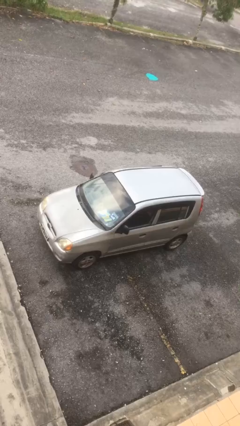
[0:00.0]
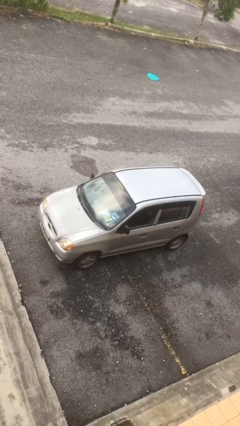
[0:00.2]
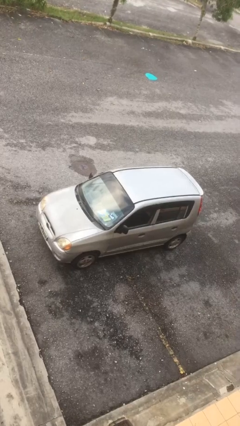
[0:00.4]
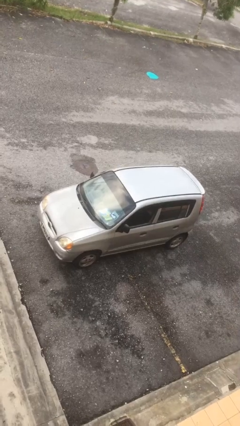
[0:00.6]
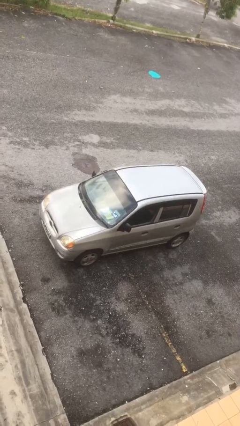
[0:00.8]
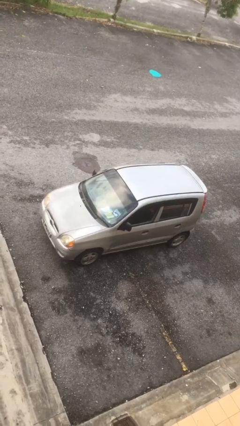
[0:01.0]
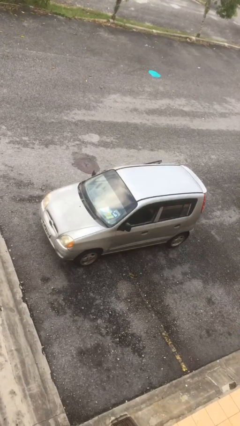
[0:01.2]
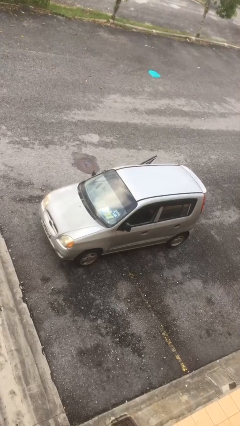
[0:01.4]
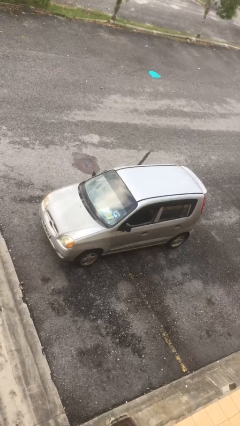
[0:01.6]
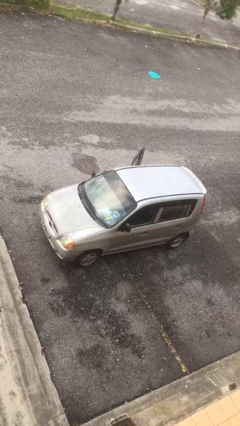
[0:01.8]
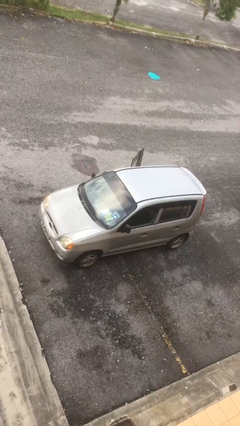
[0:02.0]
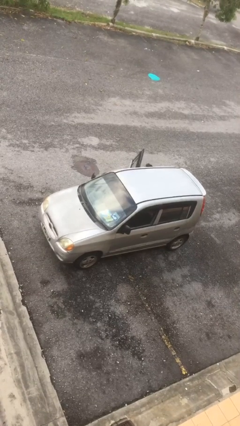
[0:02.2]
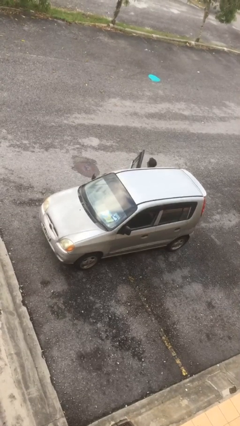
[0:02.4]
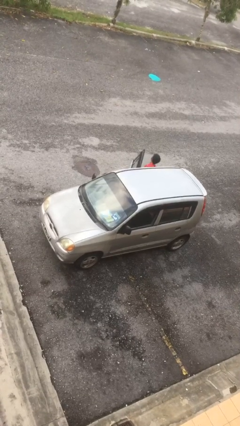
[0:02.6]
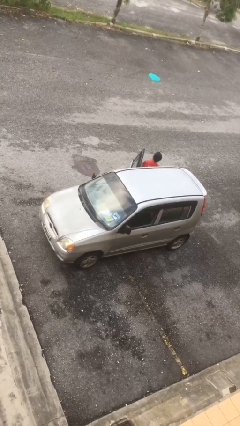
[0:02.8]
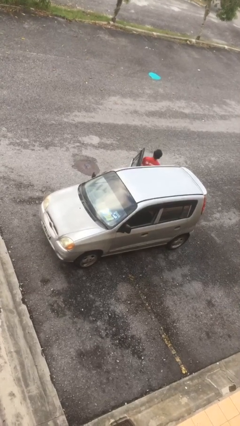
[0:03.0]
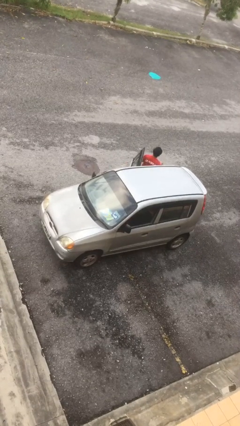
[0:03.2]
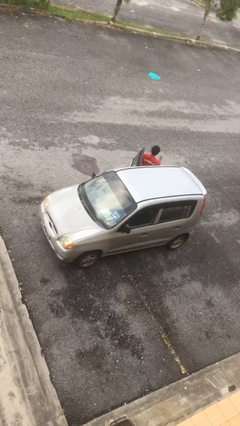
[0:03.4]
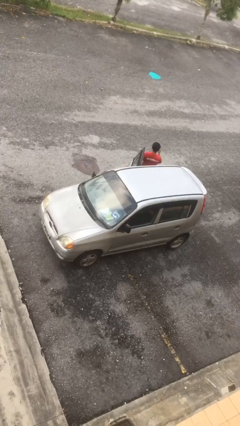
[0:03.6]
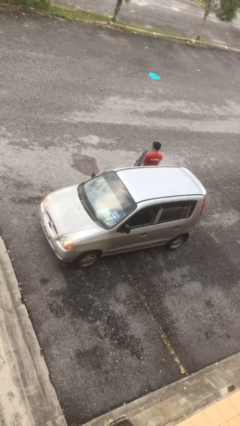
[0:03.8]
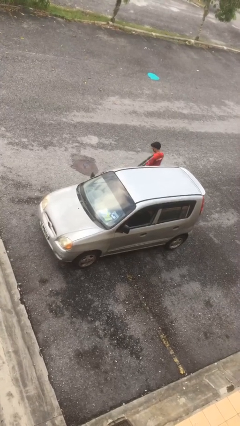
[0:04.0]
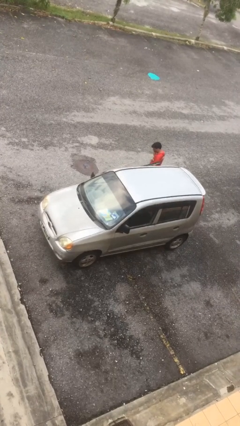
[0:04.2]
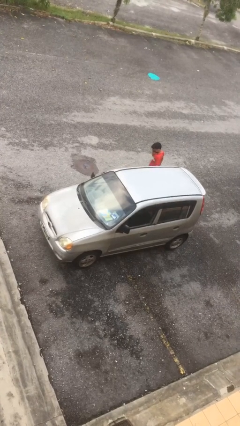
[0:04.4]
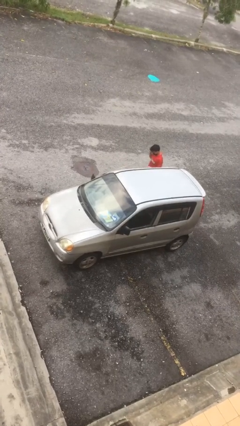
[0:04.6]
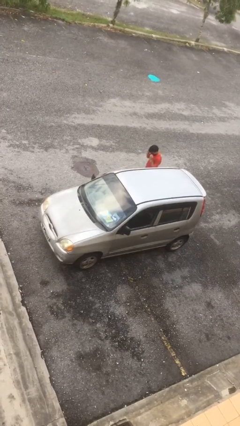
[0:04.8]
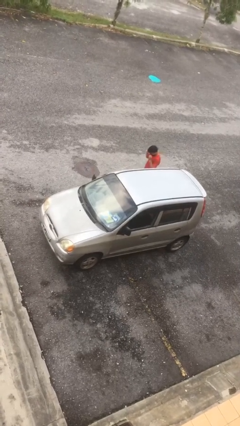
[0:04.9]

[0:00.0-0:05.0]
car drops off person

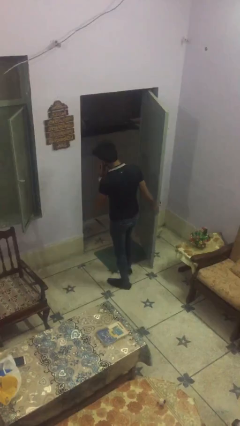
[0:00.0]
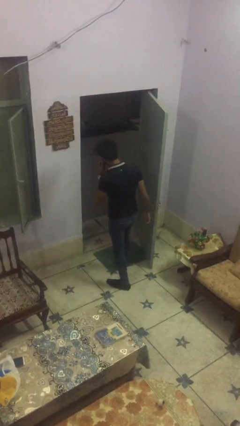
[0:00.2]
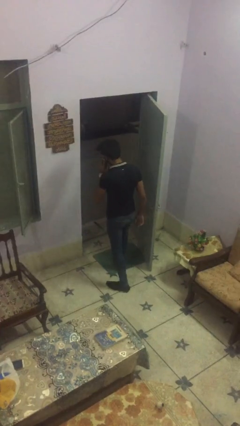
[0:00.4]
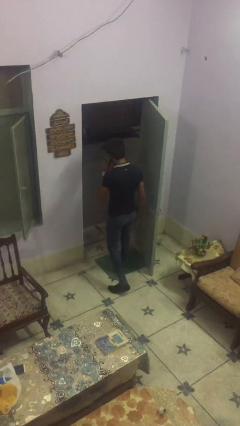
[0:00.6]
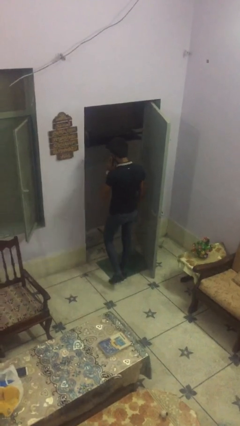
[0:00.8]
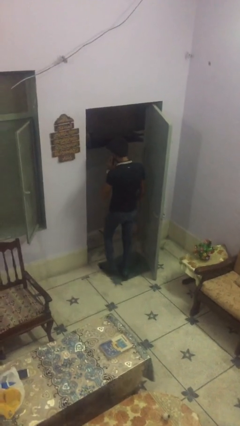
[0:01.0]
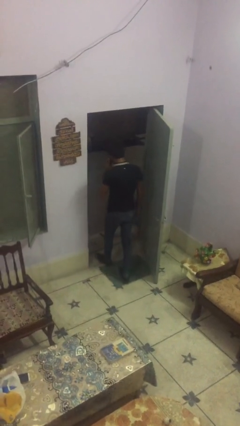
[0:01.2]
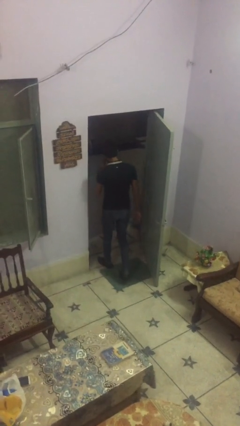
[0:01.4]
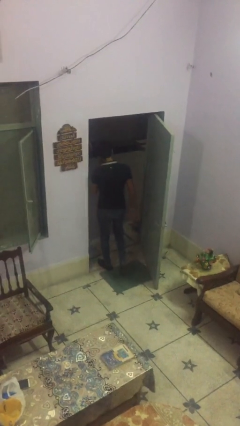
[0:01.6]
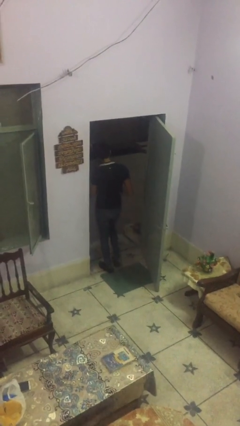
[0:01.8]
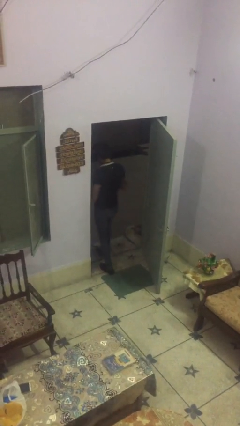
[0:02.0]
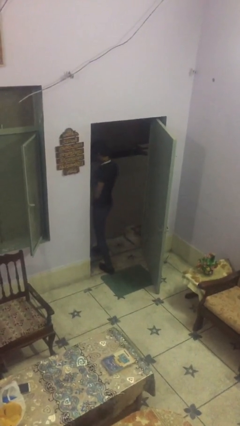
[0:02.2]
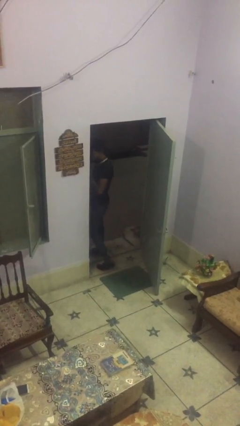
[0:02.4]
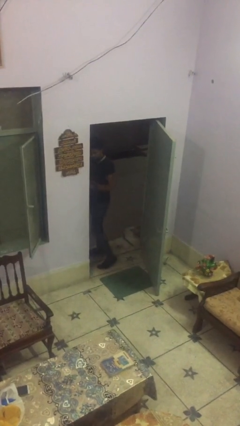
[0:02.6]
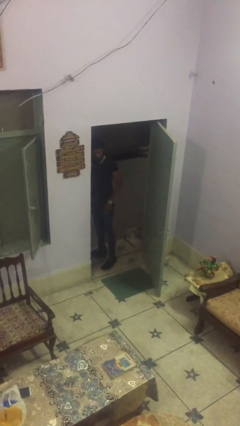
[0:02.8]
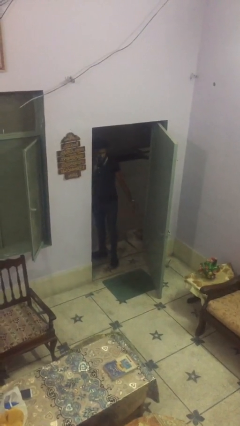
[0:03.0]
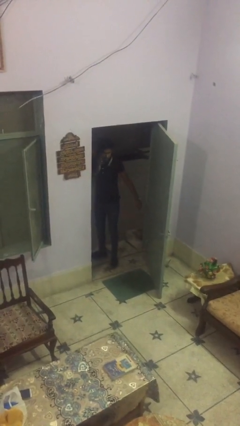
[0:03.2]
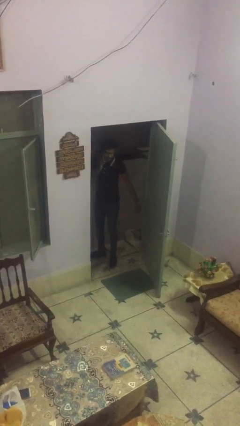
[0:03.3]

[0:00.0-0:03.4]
person exits scene through structure

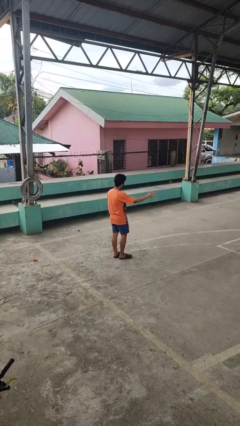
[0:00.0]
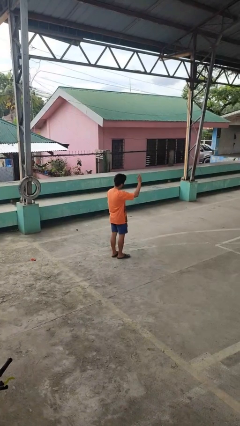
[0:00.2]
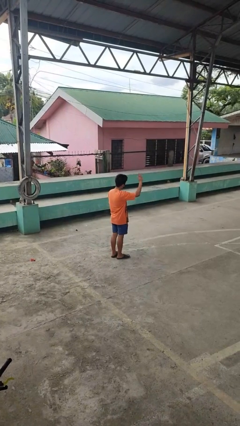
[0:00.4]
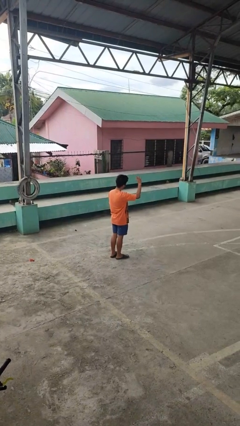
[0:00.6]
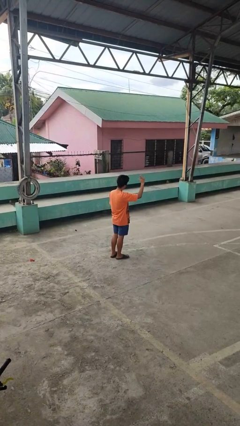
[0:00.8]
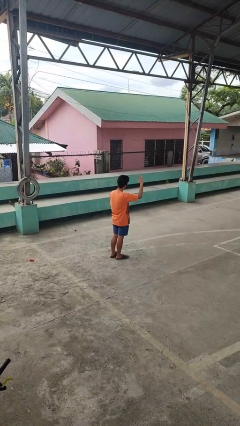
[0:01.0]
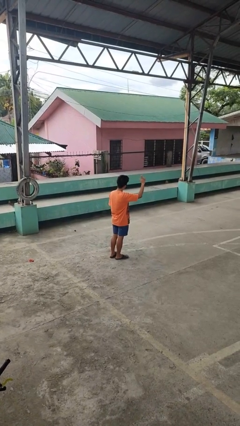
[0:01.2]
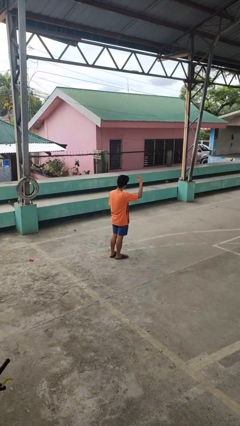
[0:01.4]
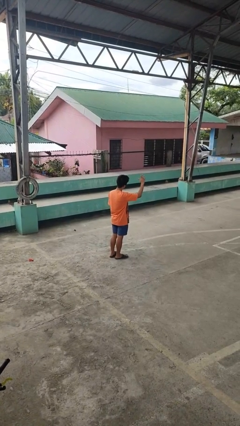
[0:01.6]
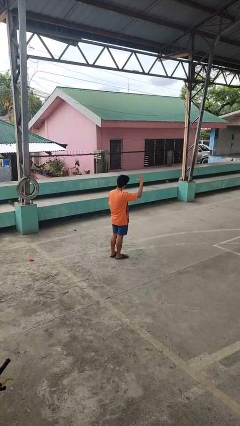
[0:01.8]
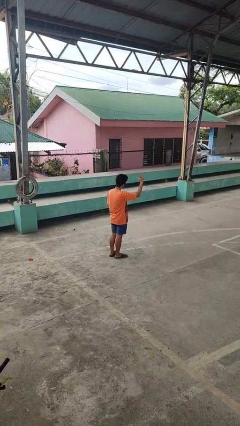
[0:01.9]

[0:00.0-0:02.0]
person waves at person

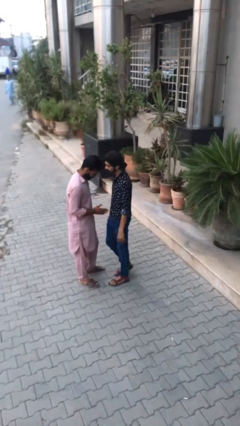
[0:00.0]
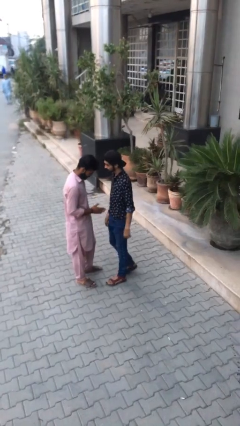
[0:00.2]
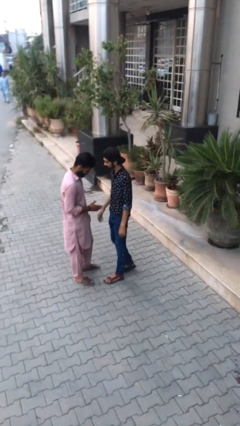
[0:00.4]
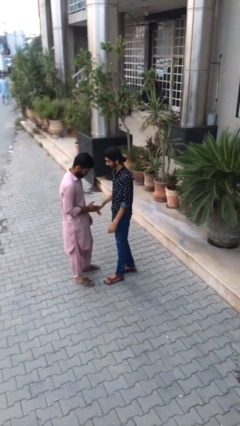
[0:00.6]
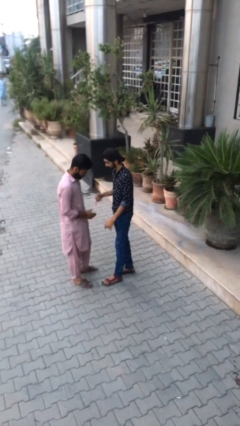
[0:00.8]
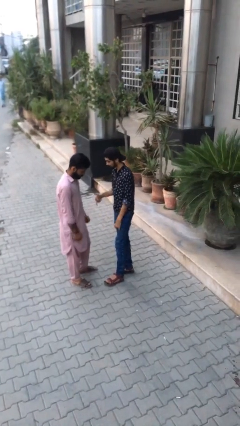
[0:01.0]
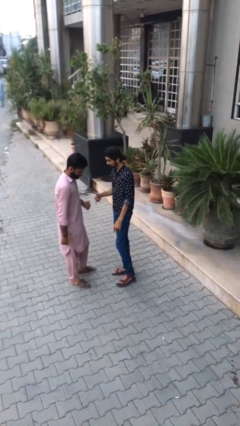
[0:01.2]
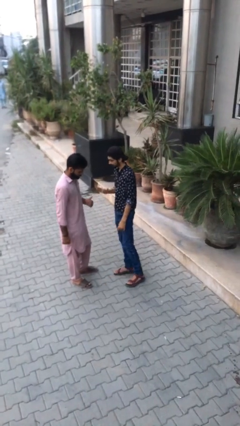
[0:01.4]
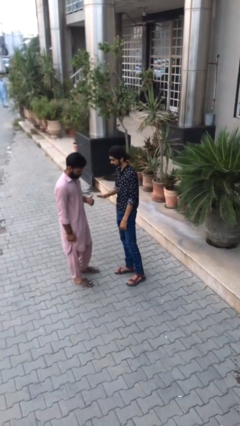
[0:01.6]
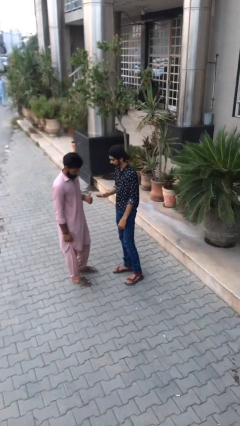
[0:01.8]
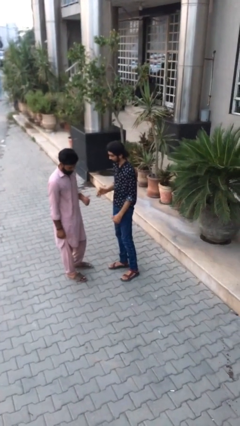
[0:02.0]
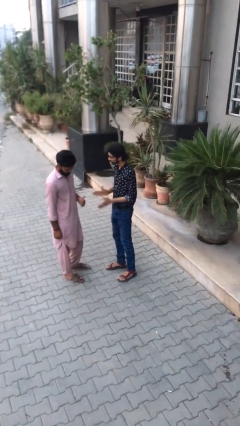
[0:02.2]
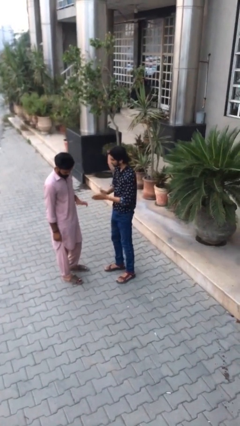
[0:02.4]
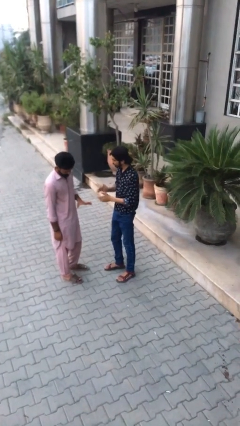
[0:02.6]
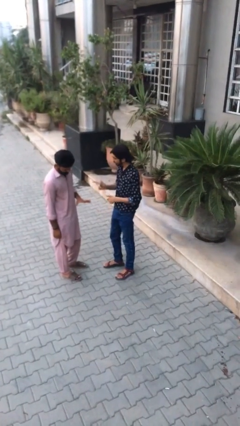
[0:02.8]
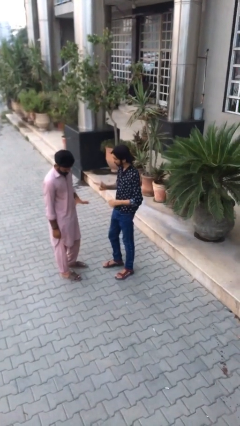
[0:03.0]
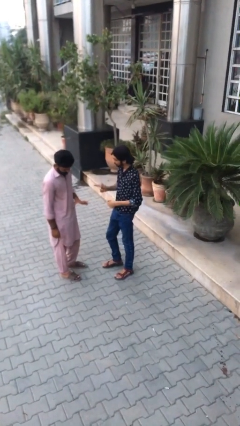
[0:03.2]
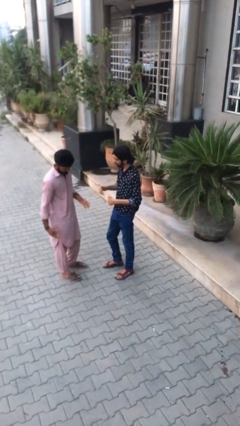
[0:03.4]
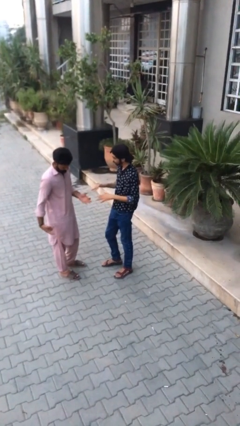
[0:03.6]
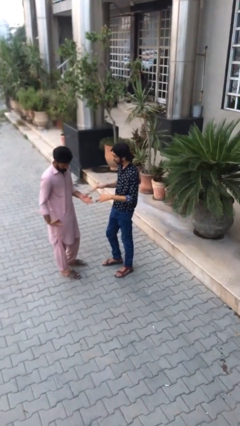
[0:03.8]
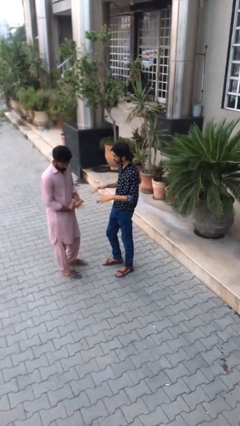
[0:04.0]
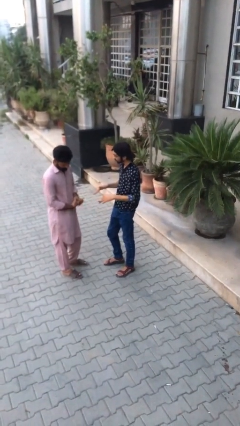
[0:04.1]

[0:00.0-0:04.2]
person talks to person

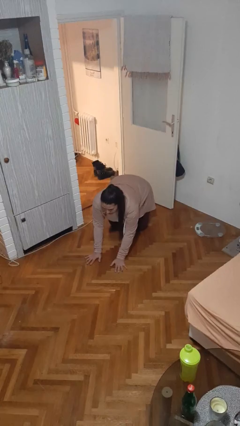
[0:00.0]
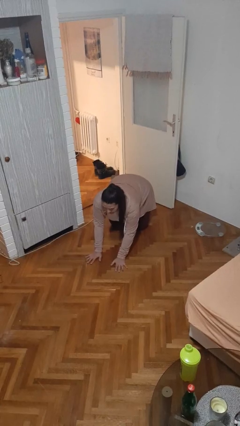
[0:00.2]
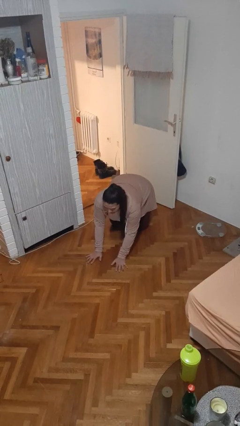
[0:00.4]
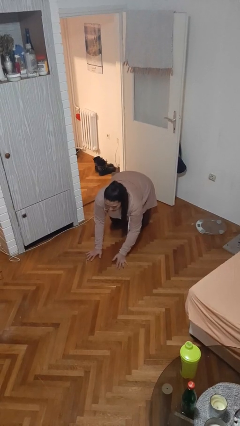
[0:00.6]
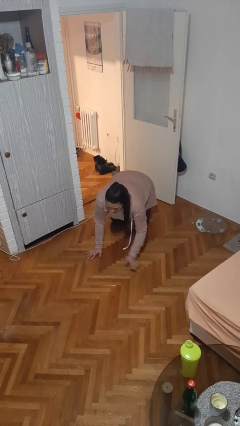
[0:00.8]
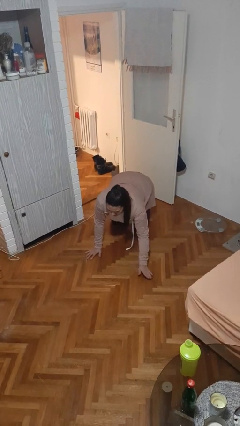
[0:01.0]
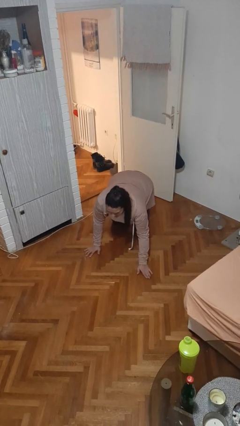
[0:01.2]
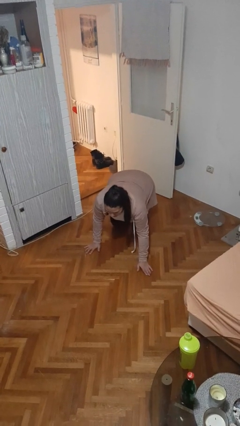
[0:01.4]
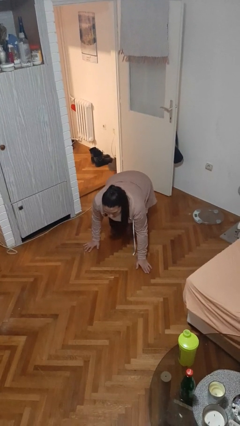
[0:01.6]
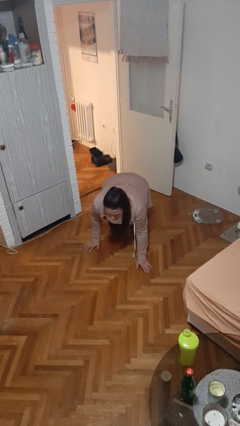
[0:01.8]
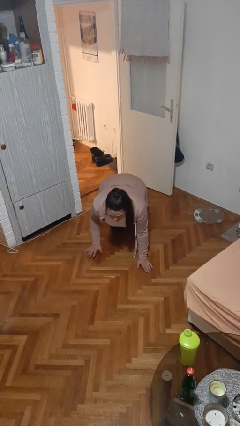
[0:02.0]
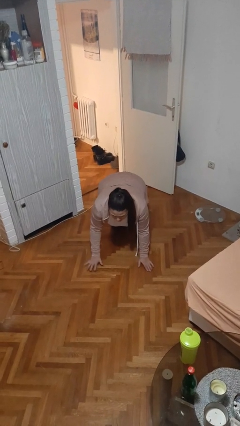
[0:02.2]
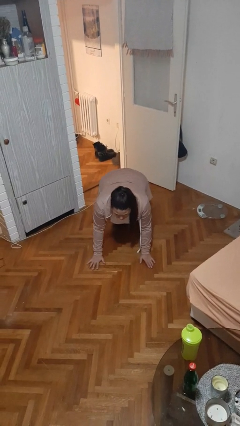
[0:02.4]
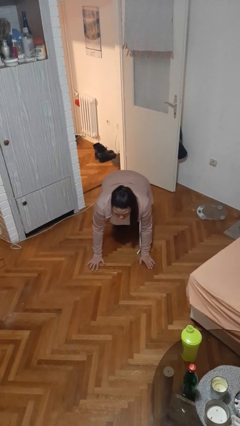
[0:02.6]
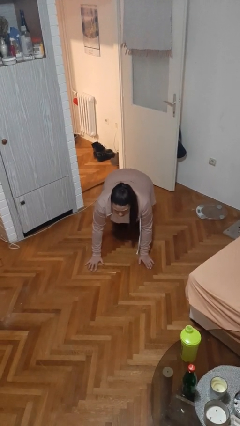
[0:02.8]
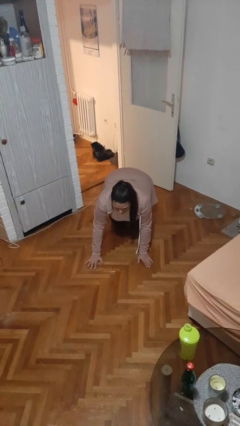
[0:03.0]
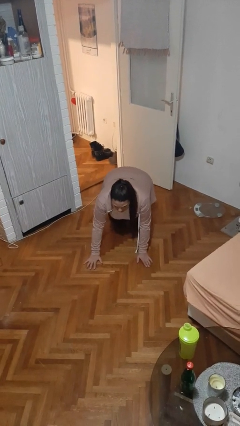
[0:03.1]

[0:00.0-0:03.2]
person crawls
